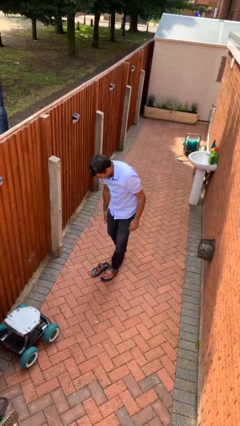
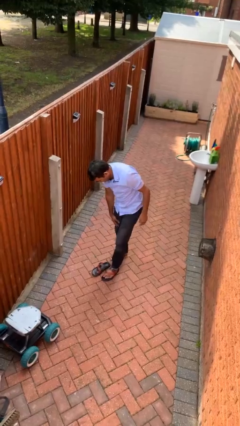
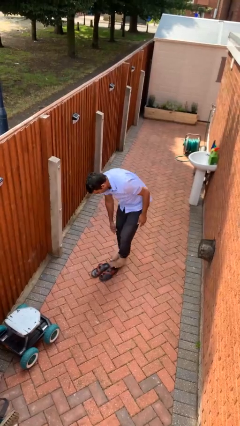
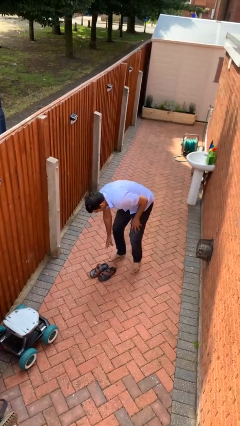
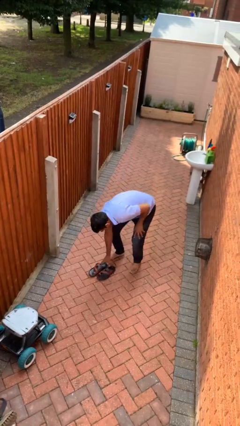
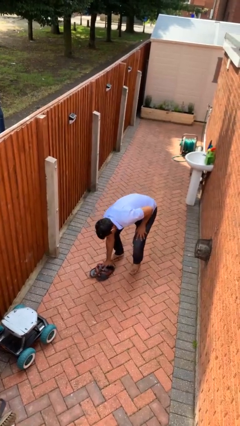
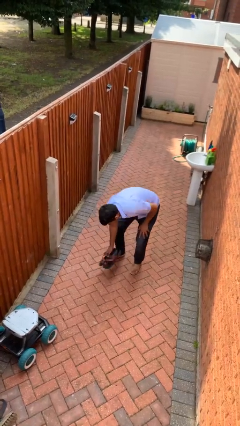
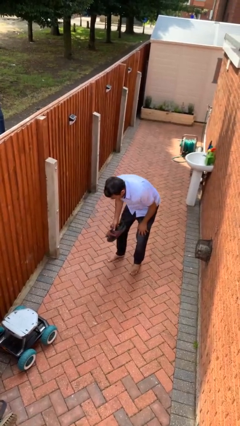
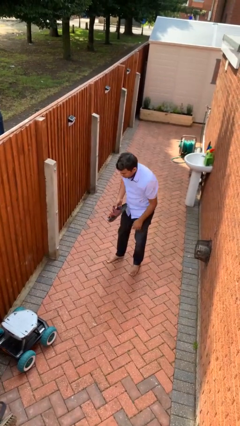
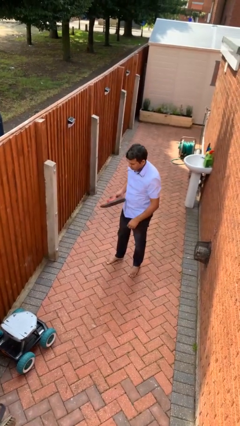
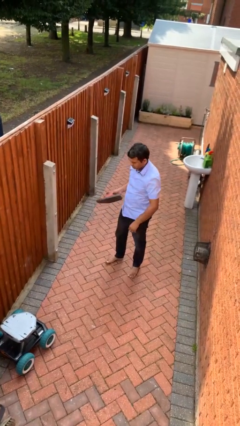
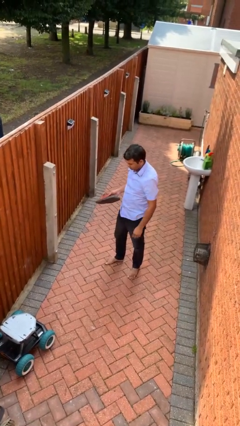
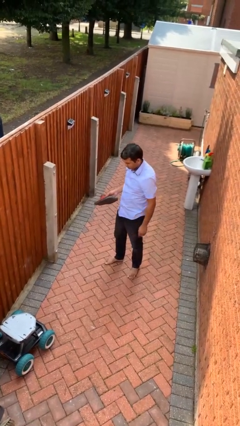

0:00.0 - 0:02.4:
person takes off shoes

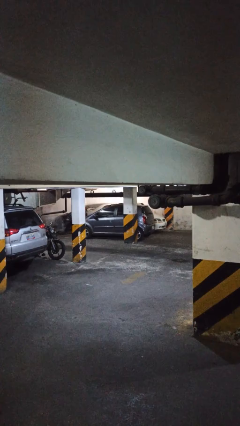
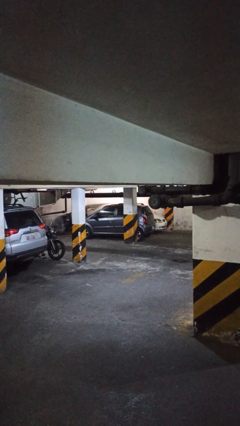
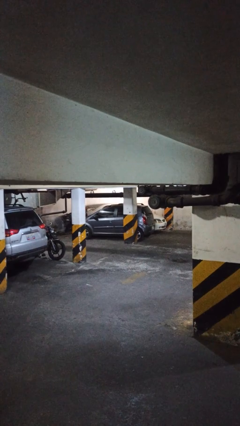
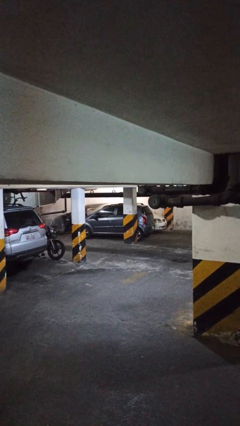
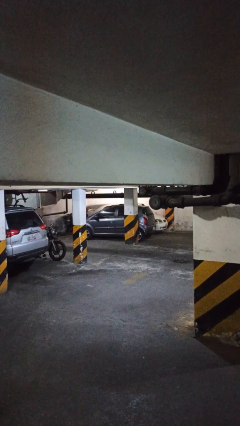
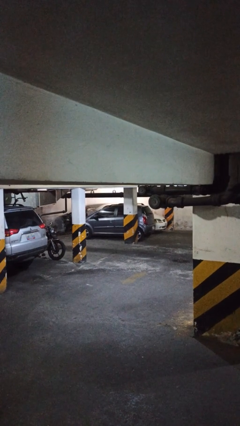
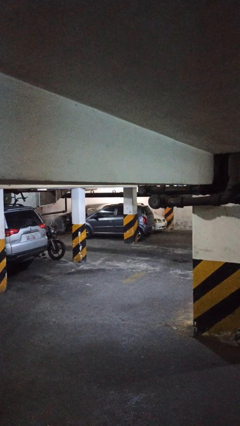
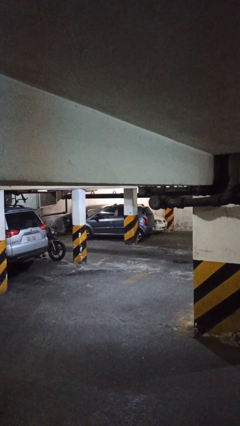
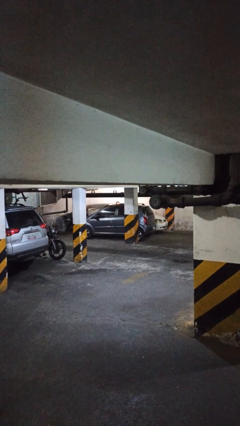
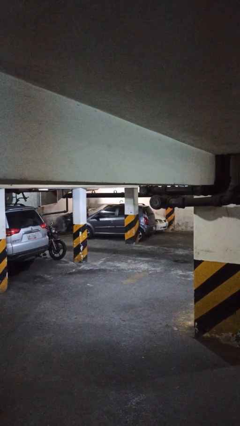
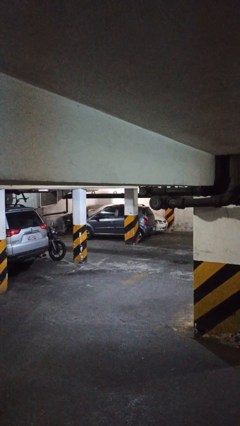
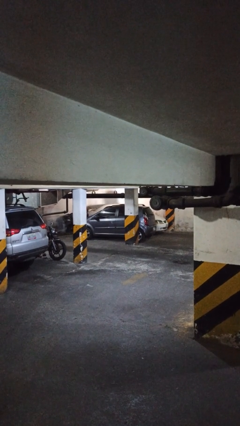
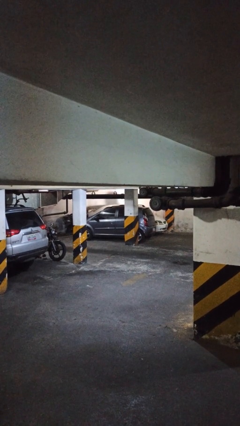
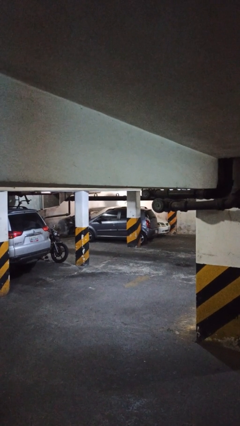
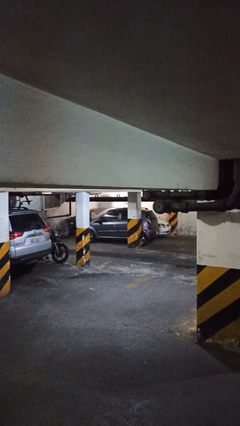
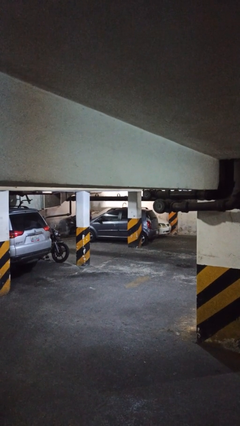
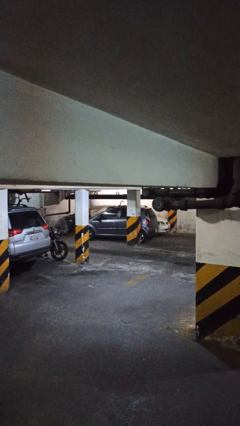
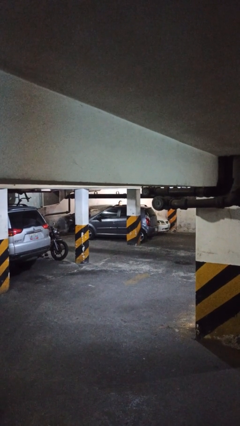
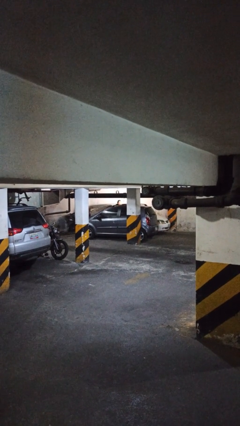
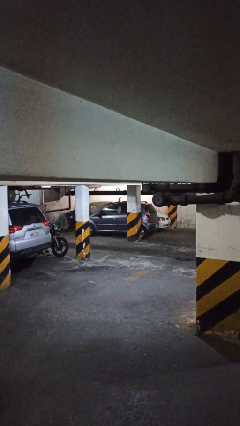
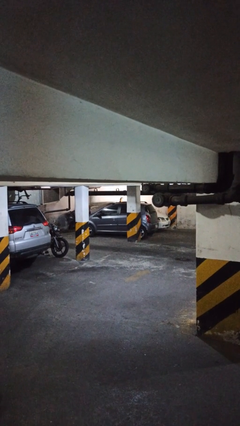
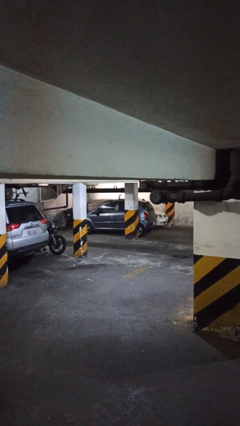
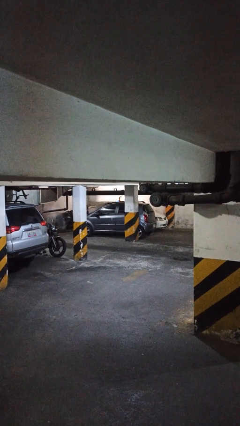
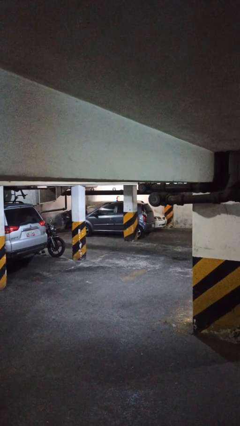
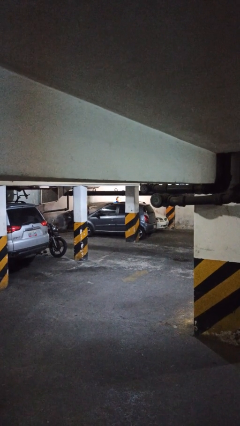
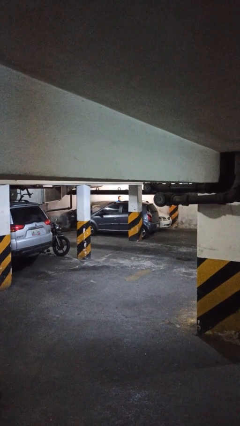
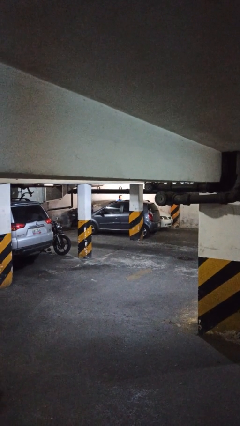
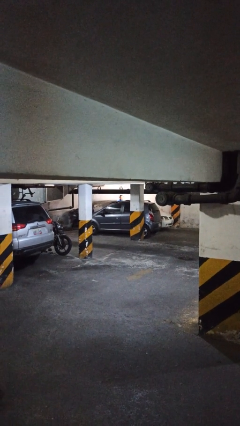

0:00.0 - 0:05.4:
car drops off person

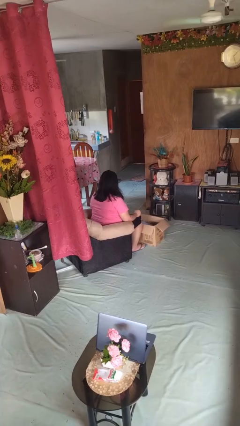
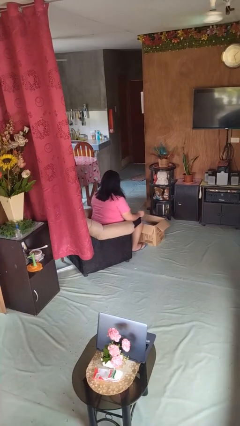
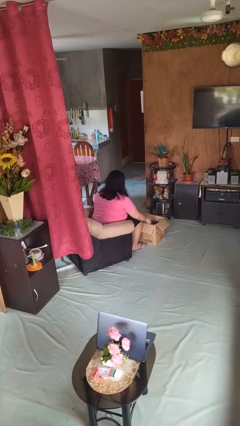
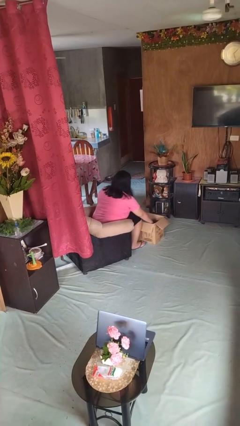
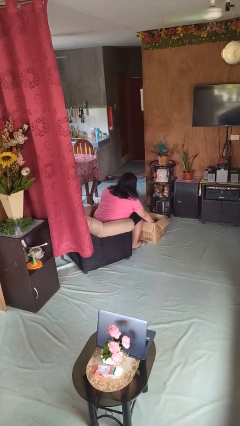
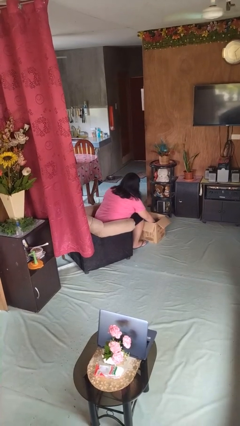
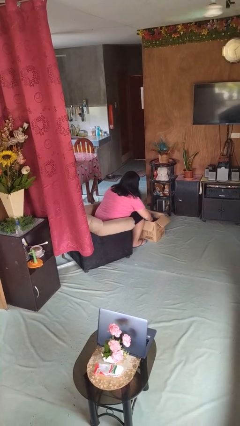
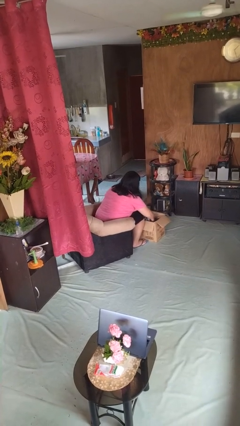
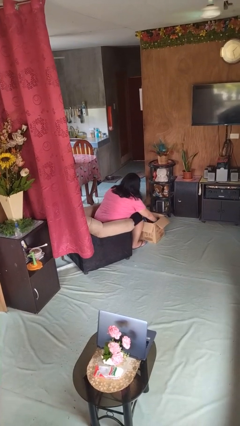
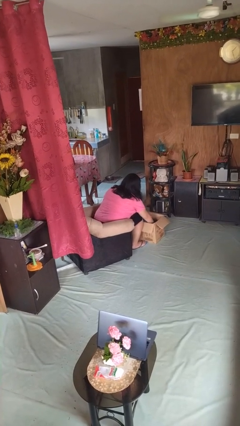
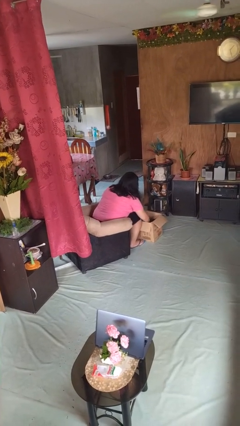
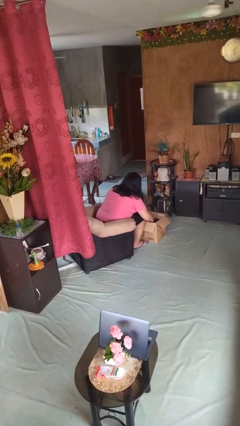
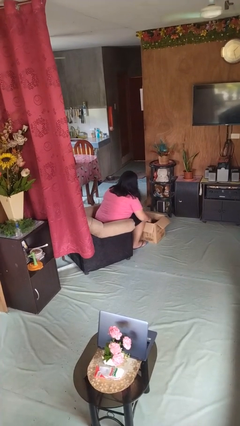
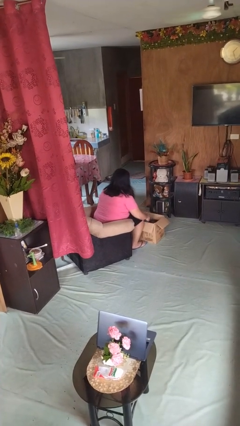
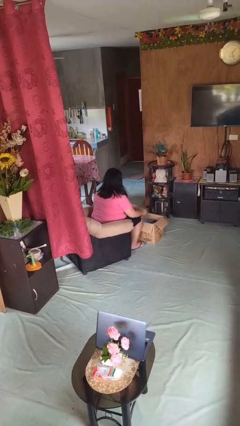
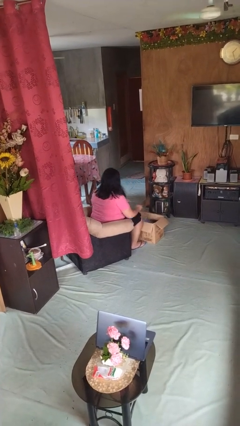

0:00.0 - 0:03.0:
person searches in box

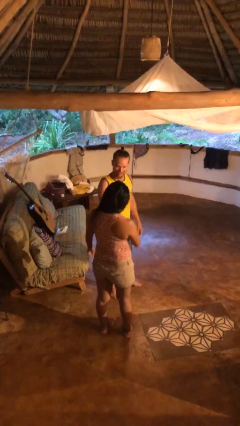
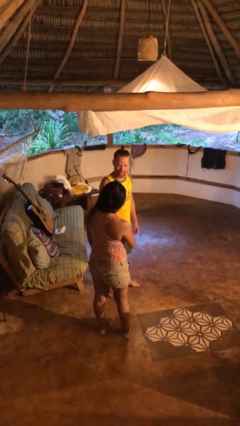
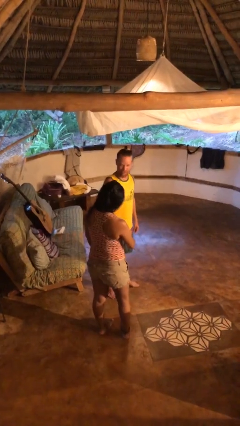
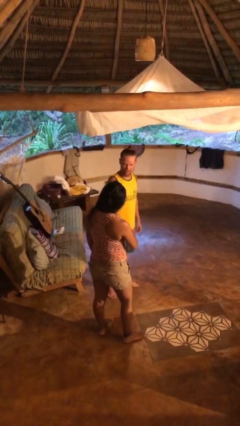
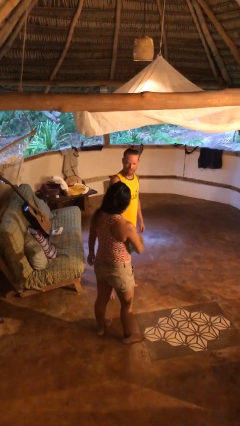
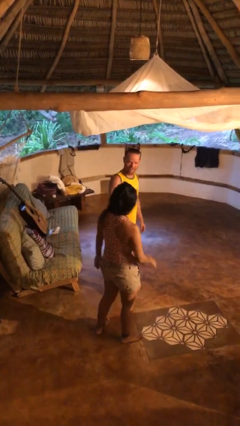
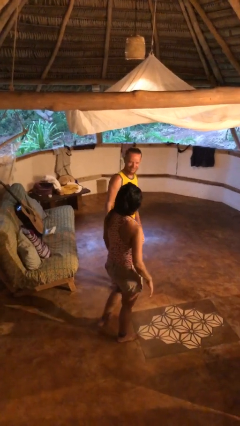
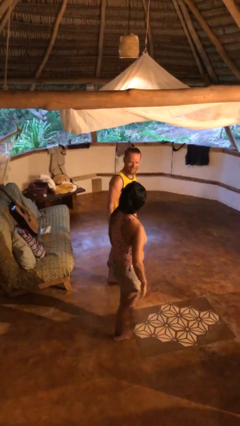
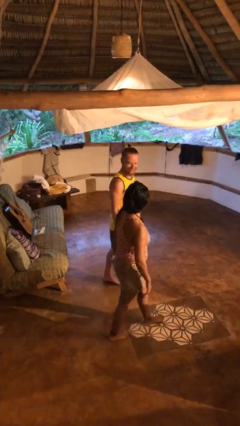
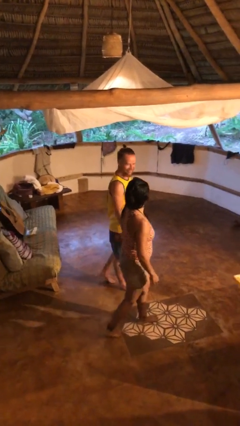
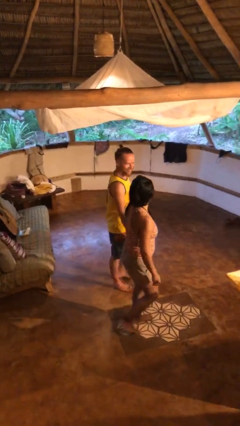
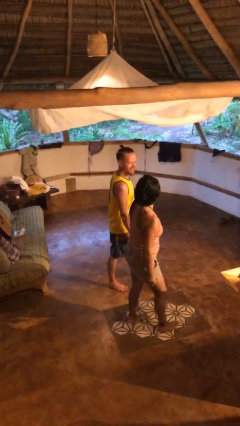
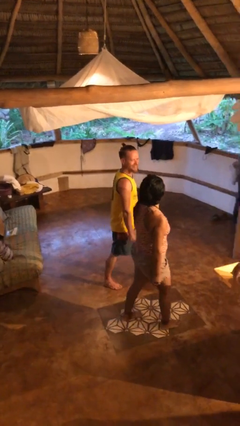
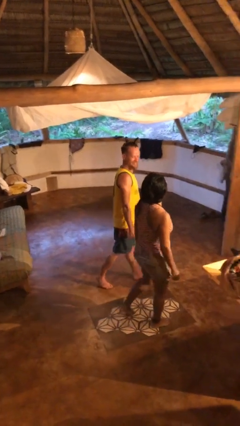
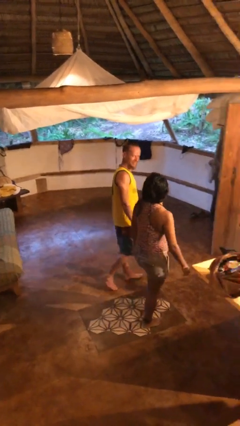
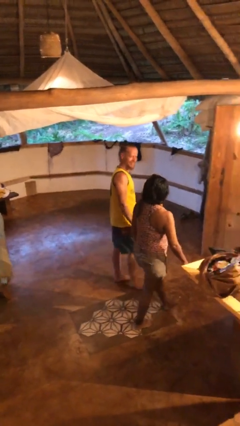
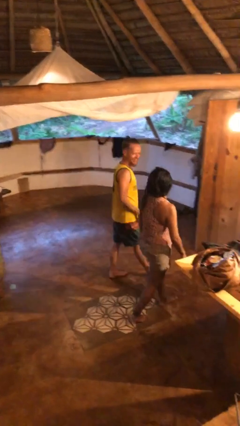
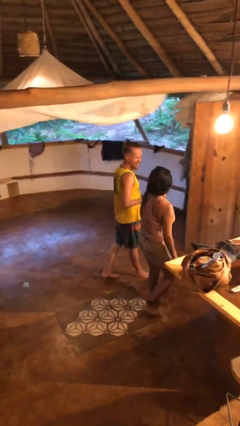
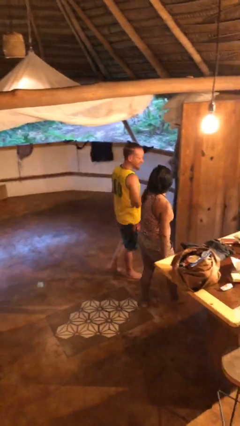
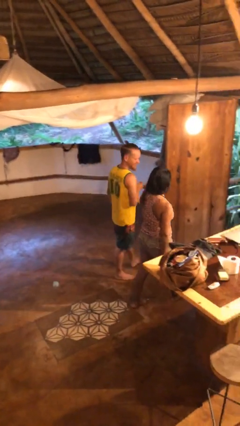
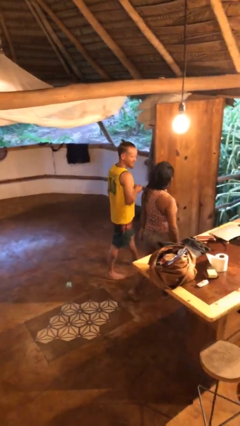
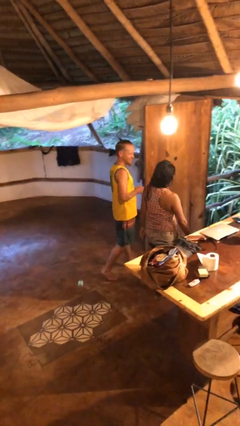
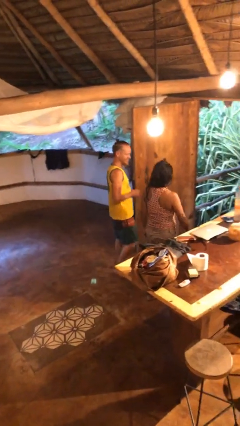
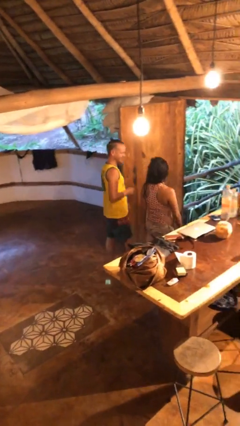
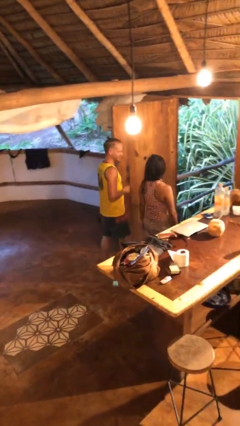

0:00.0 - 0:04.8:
person talks to person

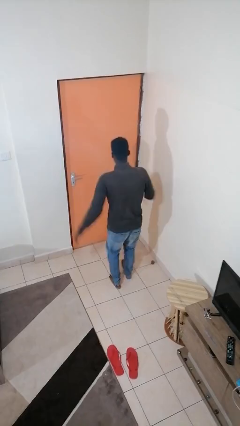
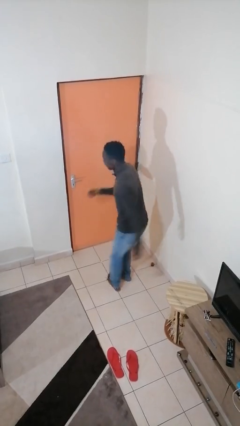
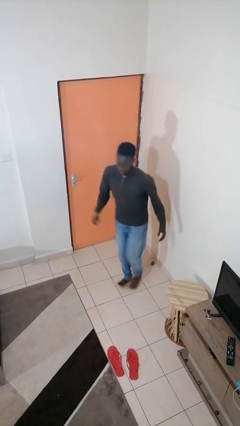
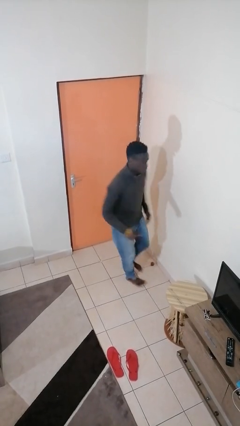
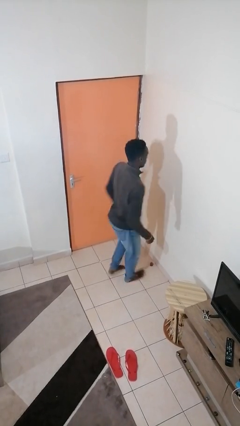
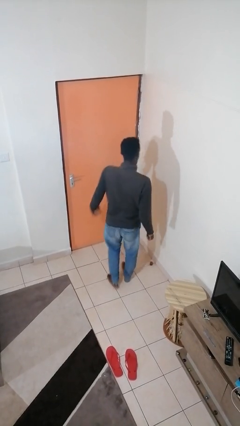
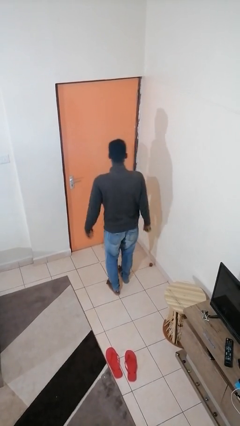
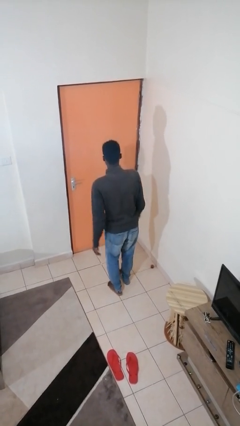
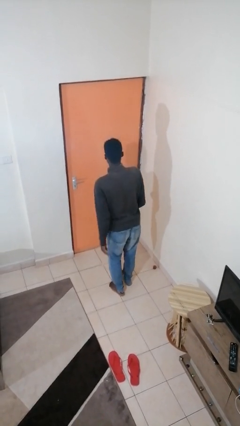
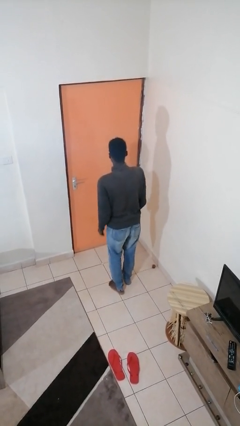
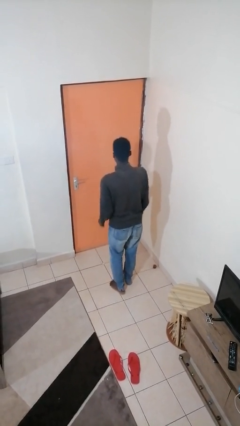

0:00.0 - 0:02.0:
person twirls
